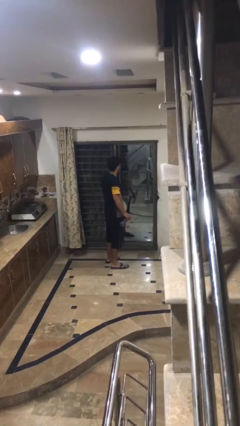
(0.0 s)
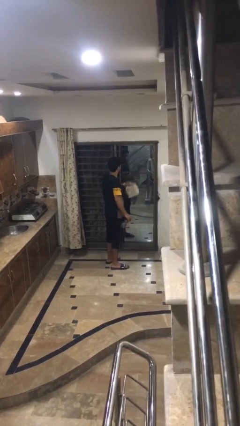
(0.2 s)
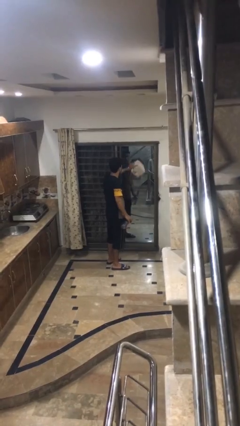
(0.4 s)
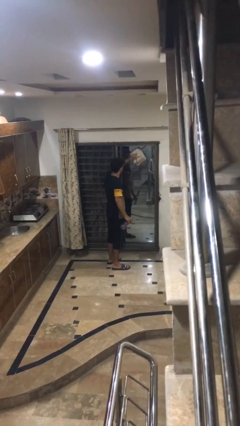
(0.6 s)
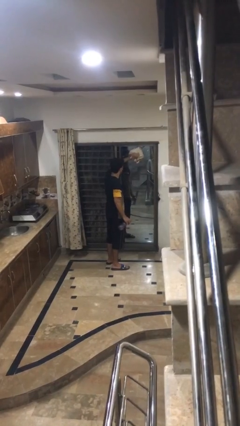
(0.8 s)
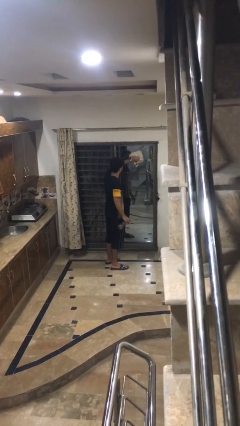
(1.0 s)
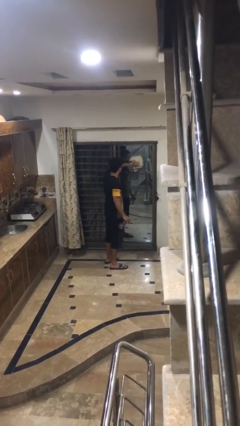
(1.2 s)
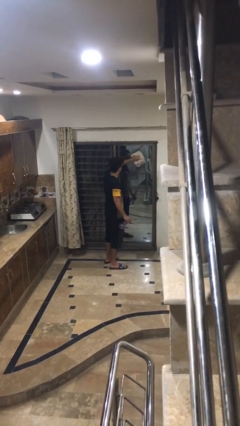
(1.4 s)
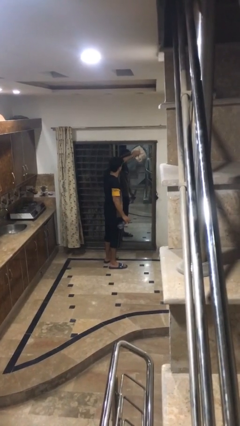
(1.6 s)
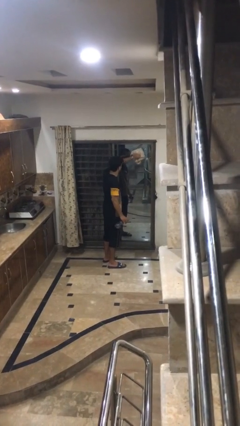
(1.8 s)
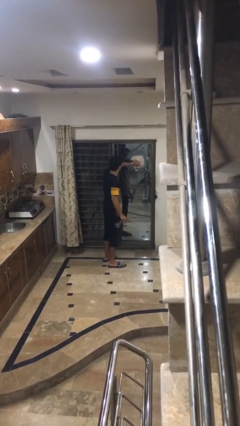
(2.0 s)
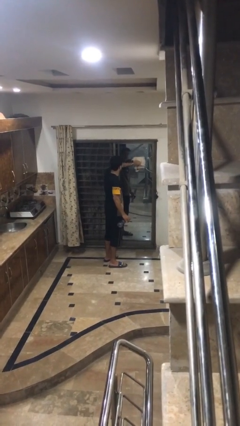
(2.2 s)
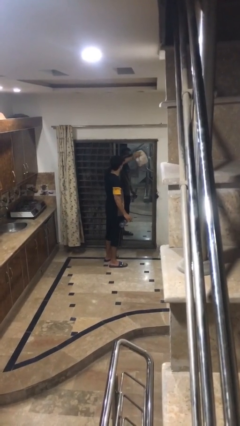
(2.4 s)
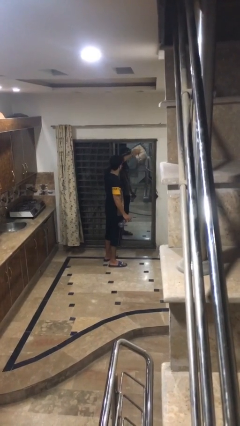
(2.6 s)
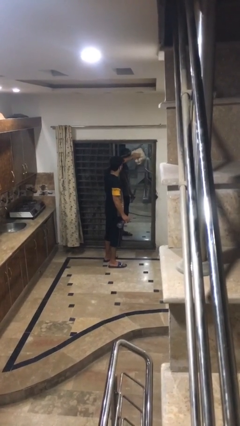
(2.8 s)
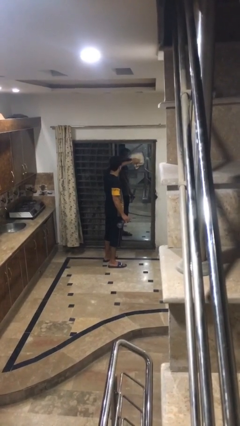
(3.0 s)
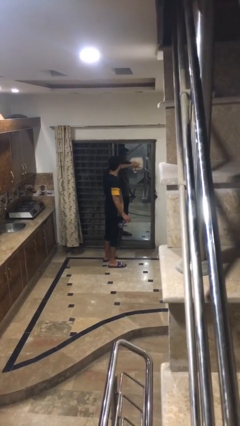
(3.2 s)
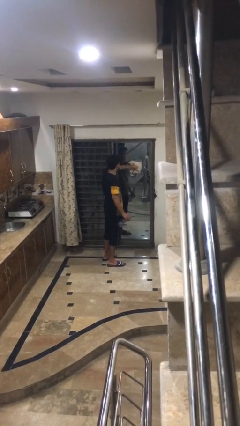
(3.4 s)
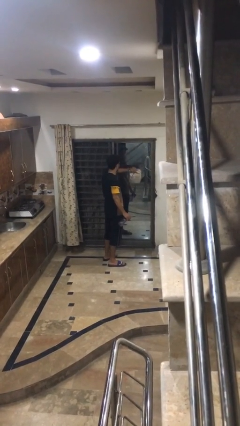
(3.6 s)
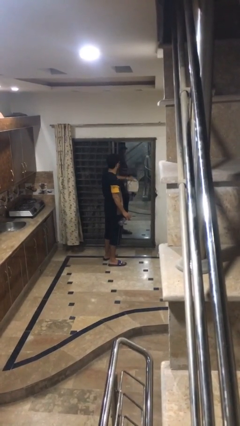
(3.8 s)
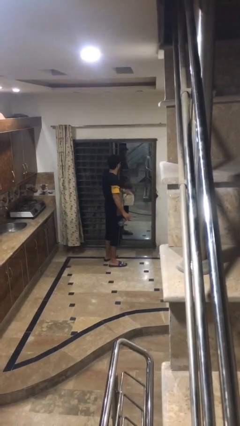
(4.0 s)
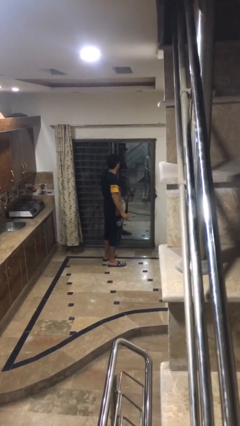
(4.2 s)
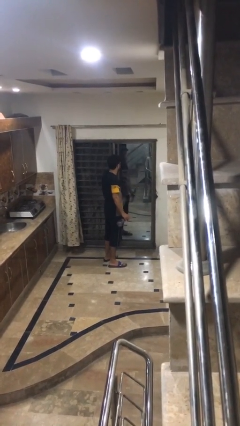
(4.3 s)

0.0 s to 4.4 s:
person washes window

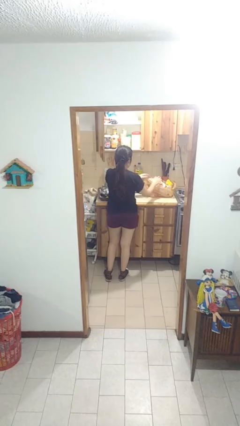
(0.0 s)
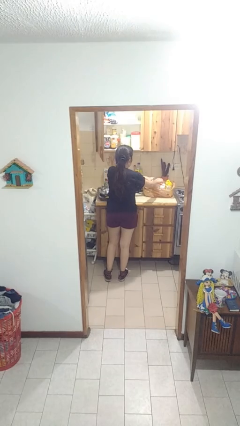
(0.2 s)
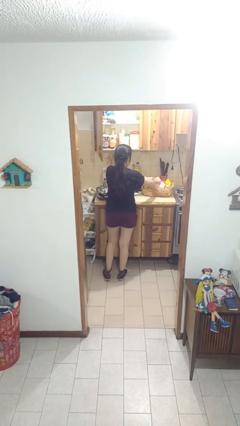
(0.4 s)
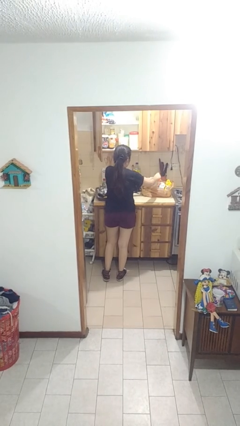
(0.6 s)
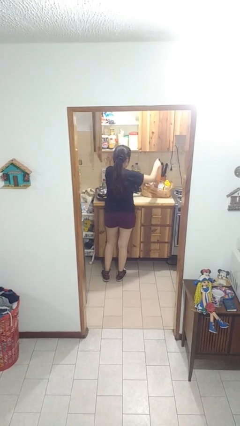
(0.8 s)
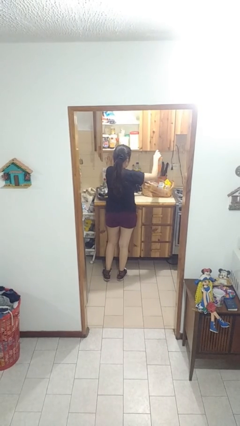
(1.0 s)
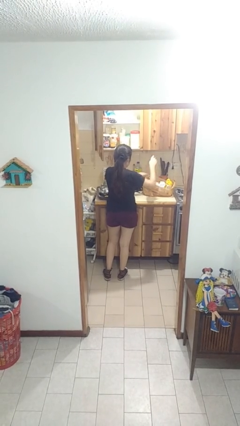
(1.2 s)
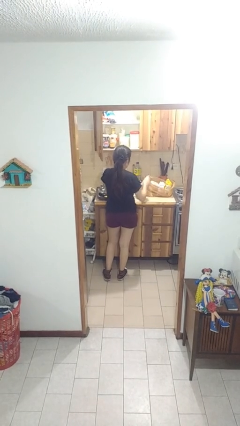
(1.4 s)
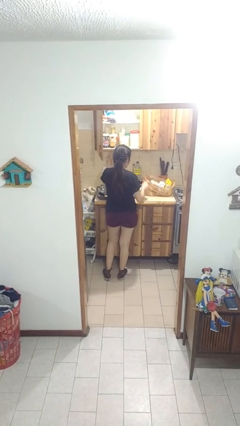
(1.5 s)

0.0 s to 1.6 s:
person takes object from bag

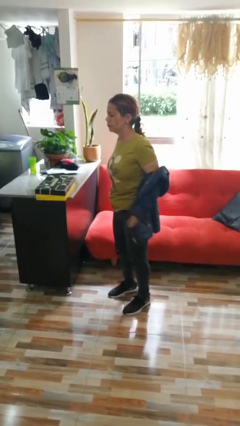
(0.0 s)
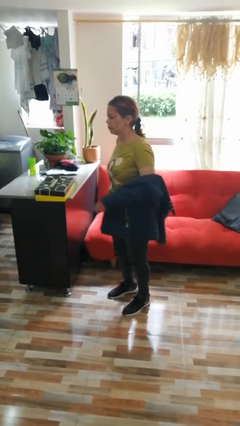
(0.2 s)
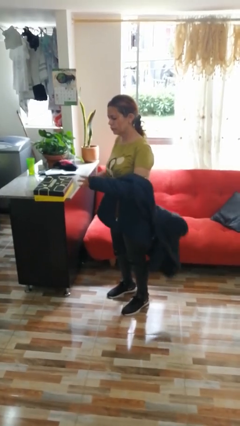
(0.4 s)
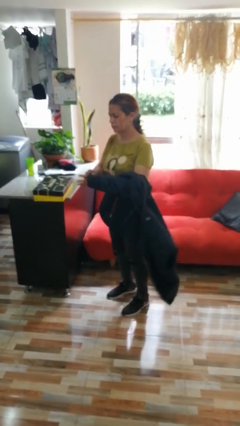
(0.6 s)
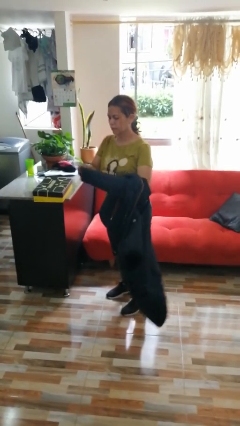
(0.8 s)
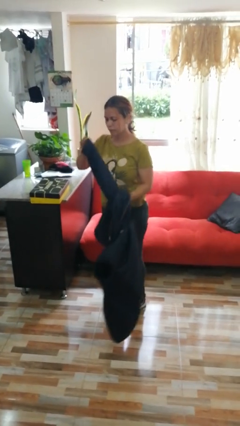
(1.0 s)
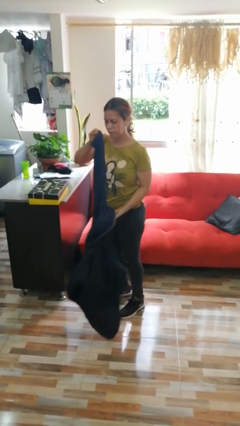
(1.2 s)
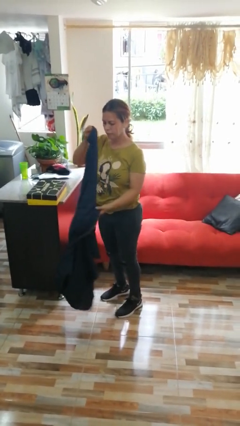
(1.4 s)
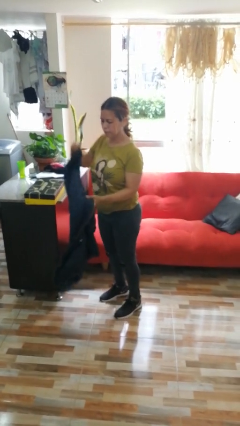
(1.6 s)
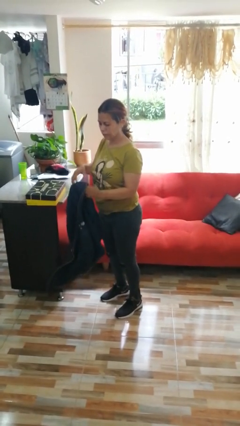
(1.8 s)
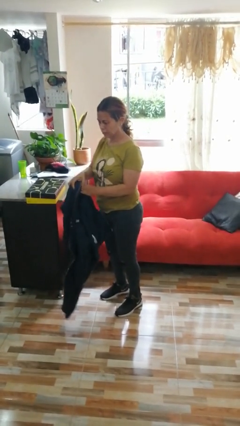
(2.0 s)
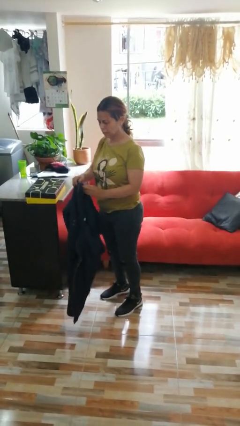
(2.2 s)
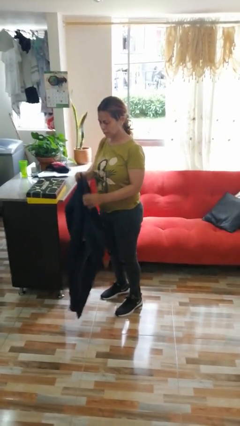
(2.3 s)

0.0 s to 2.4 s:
person unzips jacket

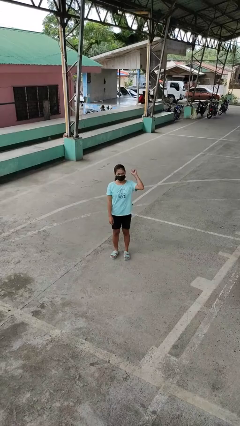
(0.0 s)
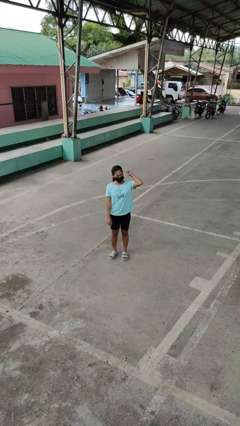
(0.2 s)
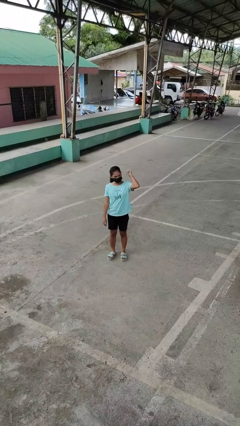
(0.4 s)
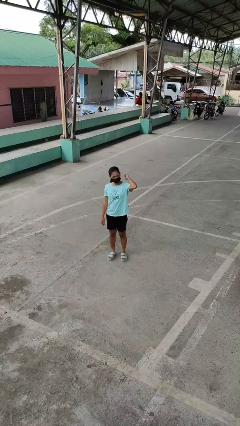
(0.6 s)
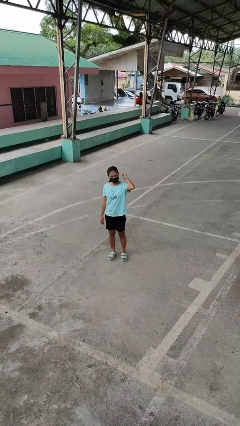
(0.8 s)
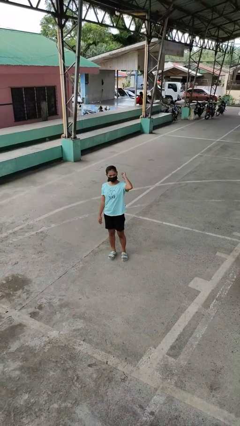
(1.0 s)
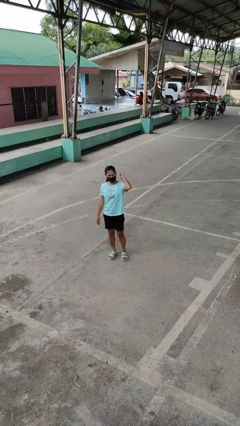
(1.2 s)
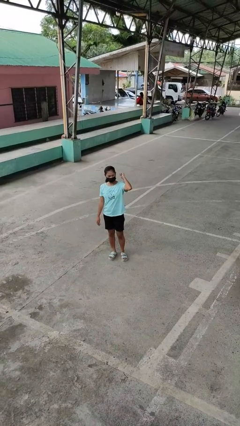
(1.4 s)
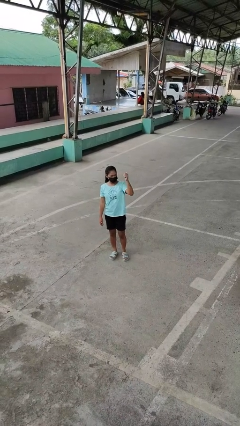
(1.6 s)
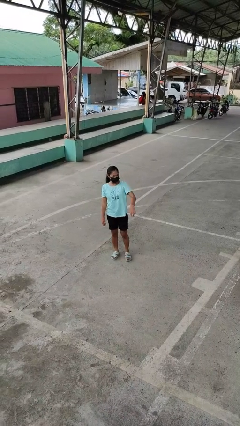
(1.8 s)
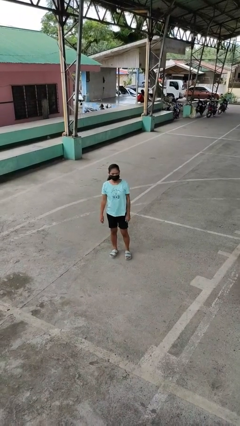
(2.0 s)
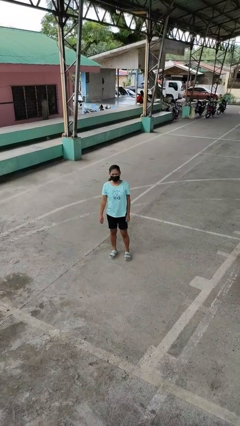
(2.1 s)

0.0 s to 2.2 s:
person gestures behind me

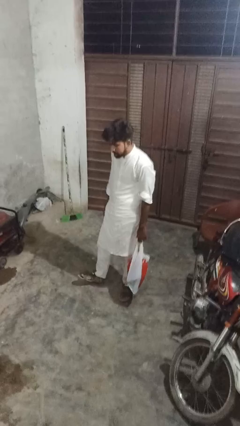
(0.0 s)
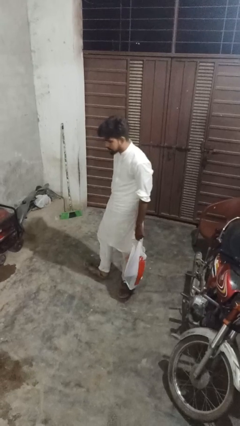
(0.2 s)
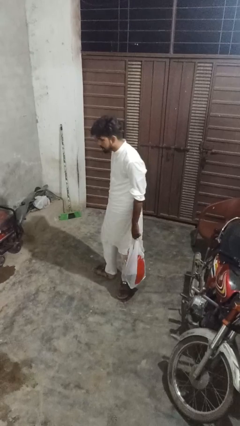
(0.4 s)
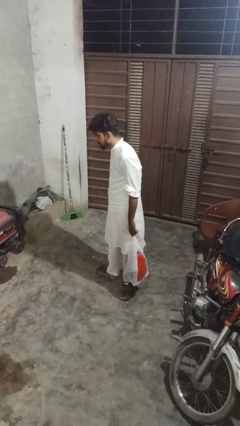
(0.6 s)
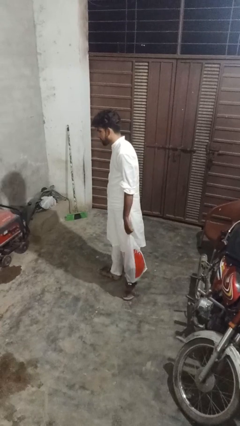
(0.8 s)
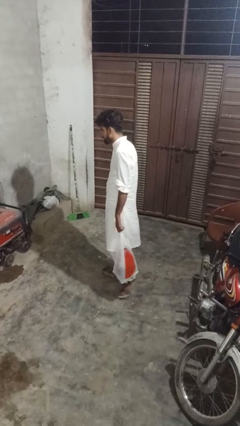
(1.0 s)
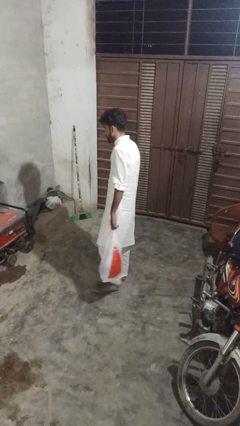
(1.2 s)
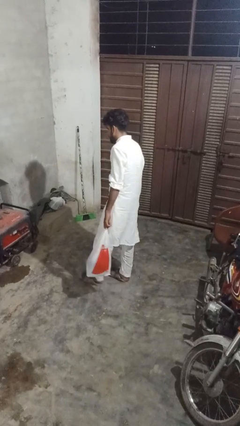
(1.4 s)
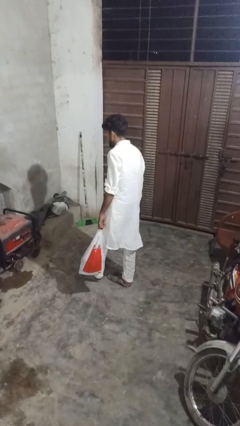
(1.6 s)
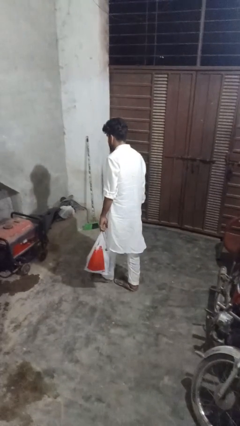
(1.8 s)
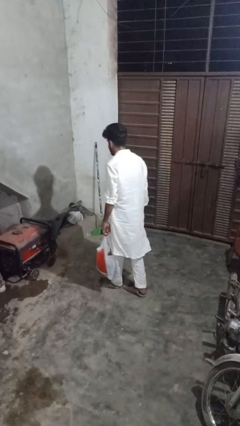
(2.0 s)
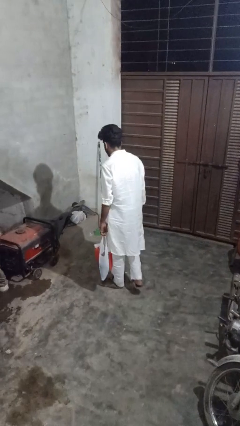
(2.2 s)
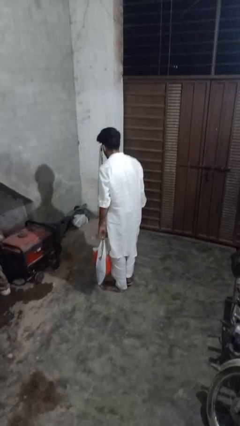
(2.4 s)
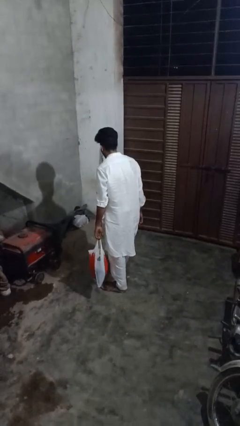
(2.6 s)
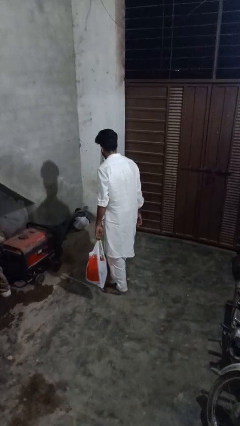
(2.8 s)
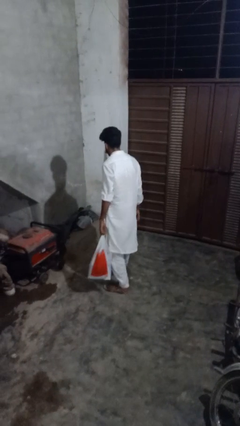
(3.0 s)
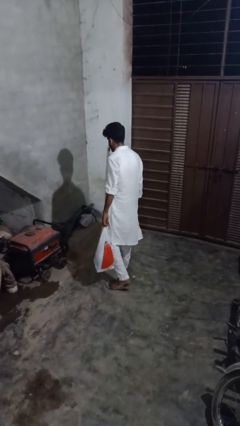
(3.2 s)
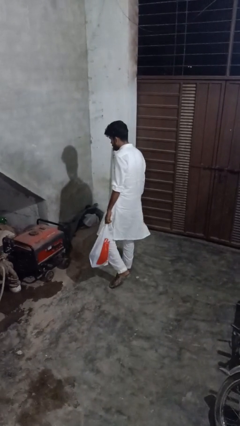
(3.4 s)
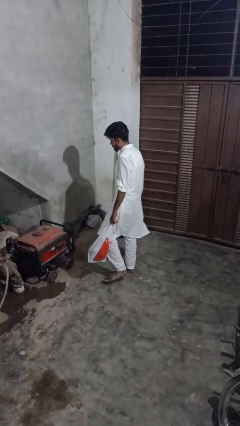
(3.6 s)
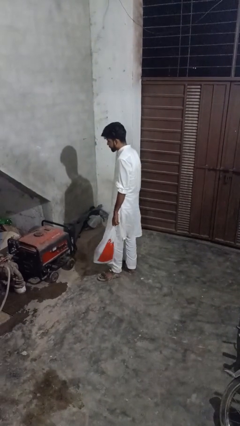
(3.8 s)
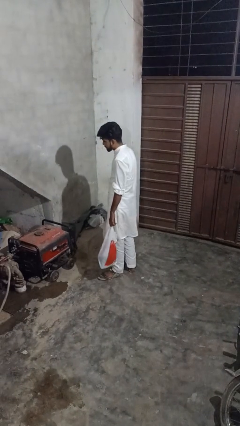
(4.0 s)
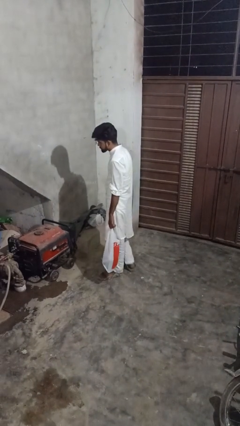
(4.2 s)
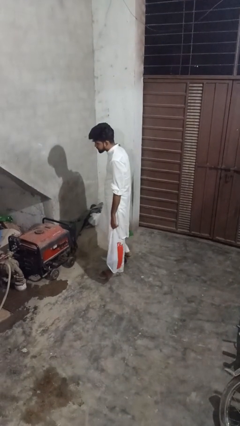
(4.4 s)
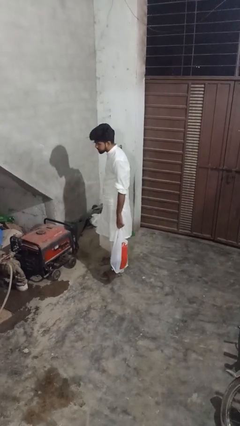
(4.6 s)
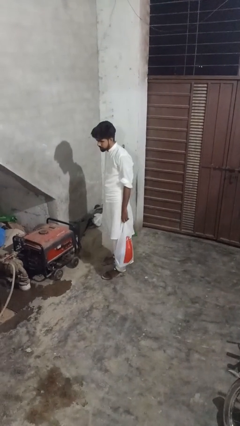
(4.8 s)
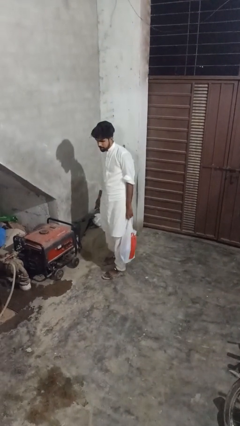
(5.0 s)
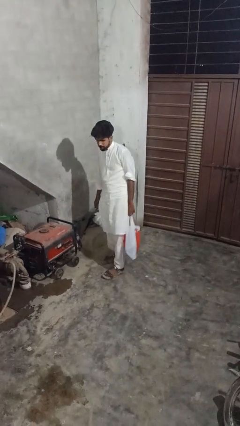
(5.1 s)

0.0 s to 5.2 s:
person carries groceries

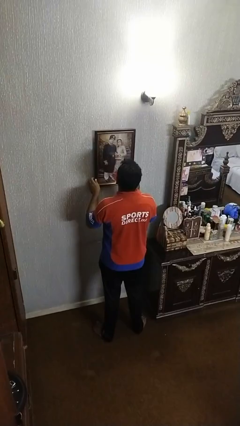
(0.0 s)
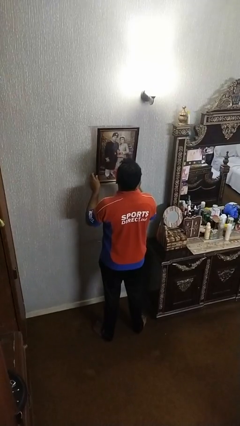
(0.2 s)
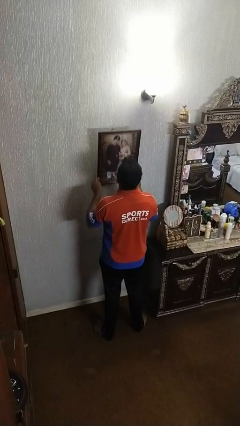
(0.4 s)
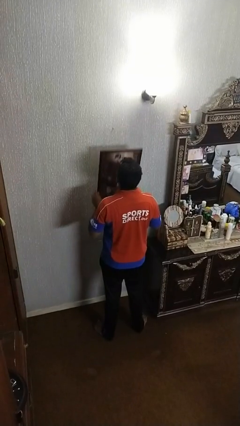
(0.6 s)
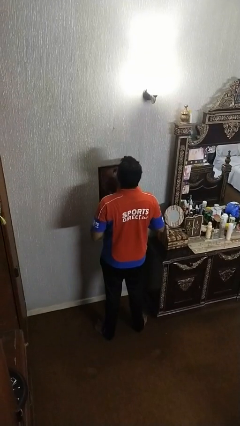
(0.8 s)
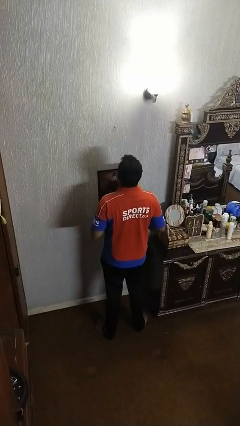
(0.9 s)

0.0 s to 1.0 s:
person takes down picture frame

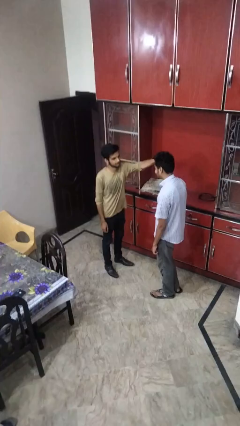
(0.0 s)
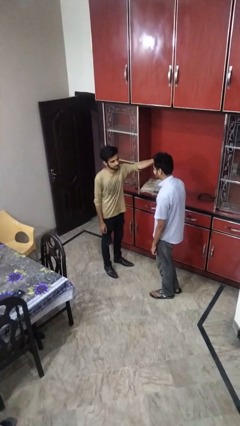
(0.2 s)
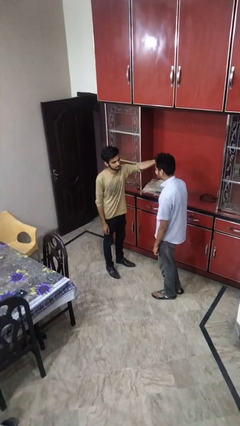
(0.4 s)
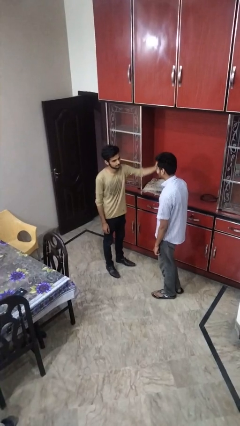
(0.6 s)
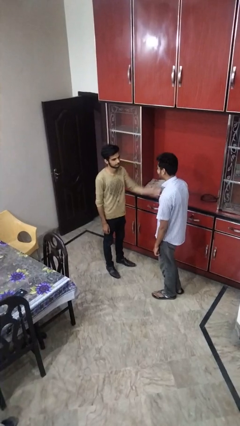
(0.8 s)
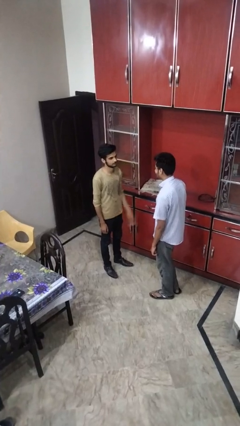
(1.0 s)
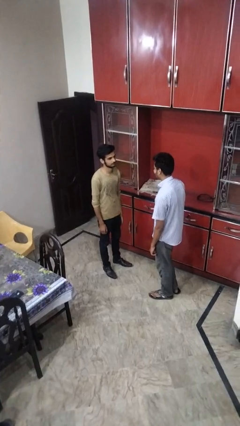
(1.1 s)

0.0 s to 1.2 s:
person grabs person by hair
